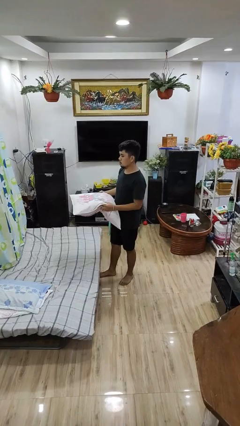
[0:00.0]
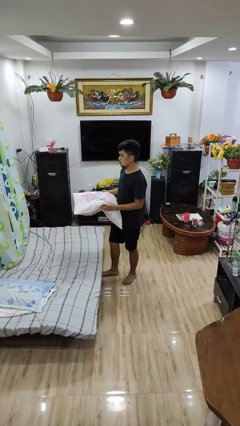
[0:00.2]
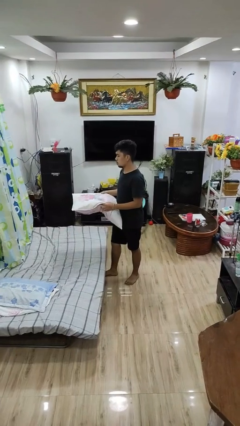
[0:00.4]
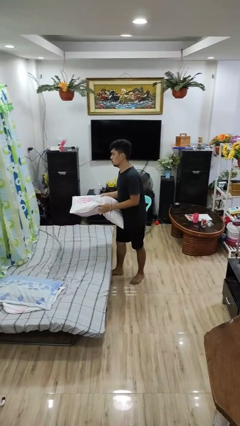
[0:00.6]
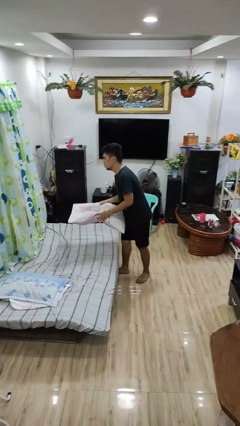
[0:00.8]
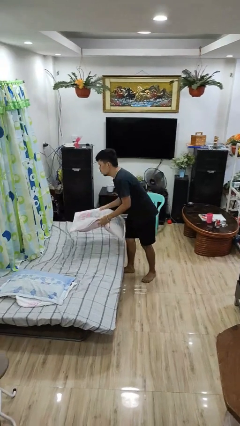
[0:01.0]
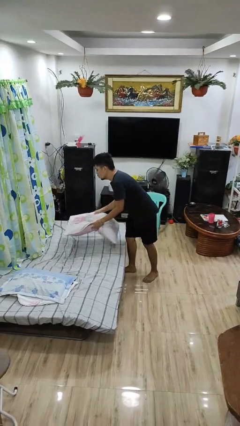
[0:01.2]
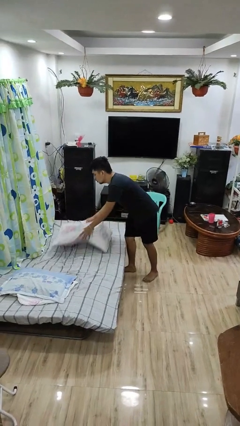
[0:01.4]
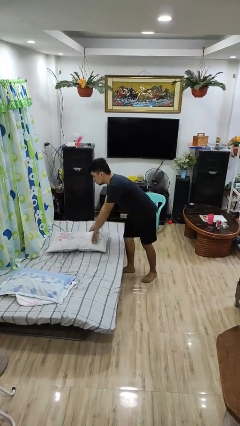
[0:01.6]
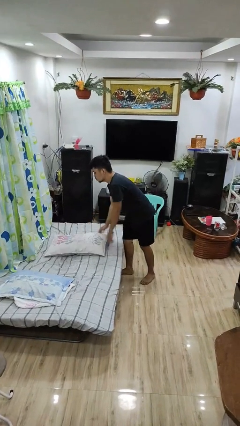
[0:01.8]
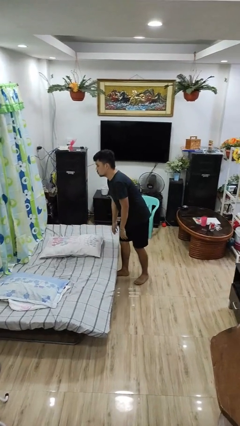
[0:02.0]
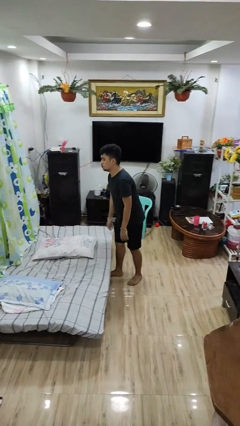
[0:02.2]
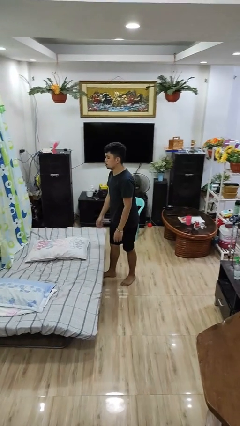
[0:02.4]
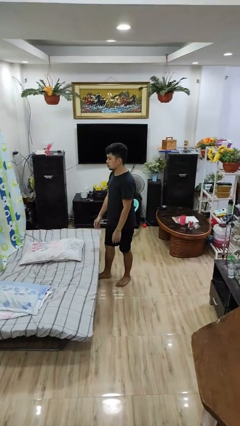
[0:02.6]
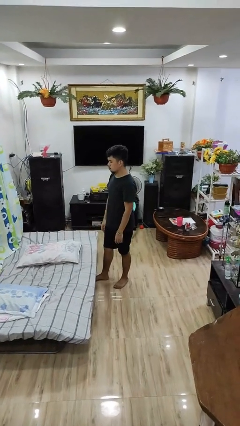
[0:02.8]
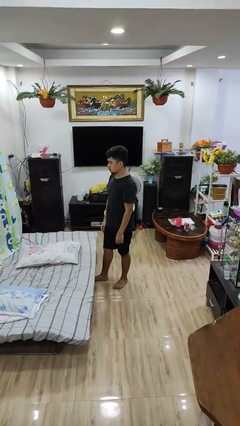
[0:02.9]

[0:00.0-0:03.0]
person puts down object on bed

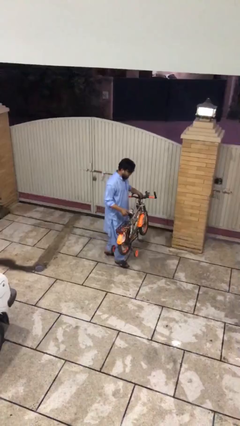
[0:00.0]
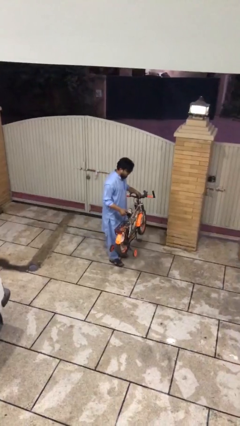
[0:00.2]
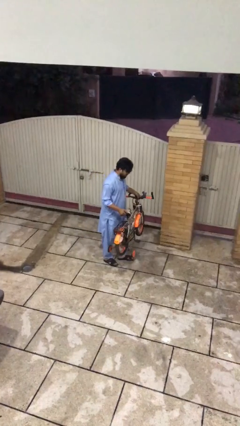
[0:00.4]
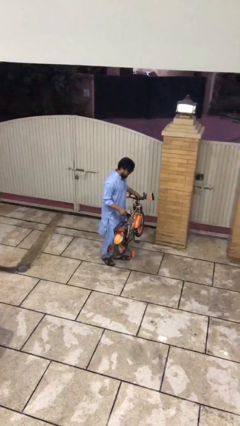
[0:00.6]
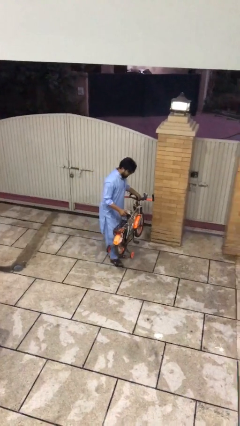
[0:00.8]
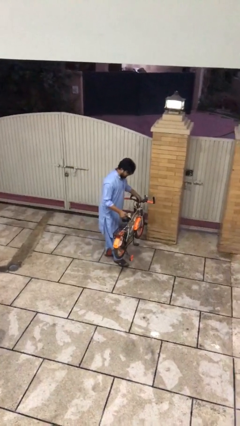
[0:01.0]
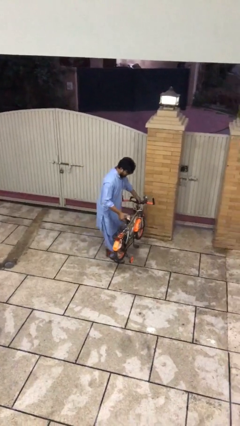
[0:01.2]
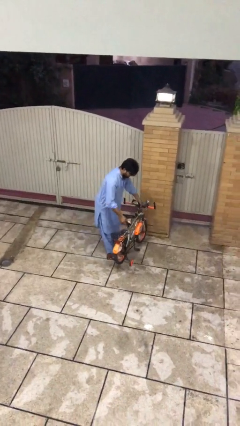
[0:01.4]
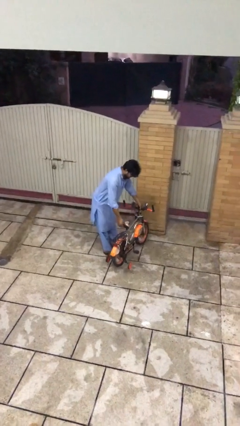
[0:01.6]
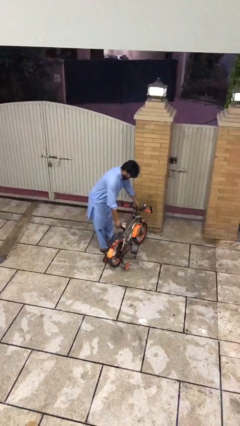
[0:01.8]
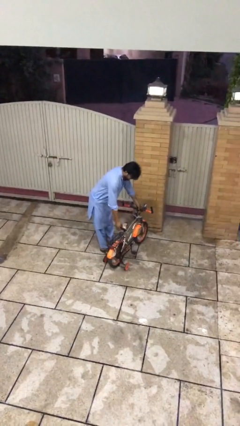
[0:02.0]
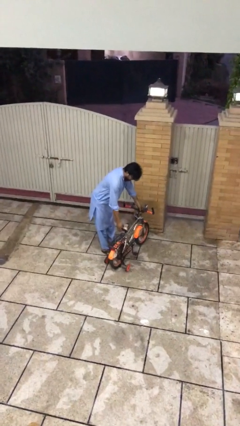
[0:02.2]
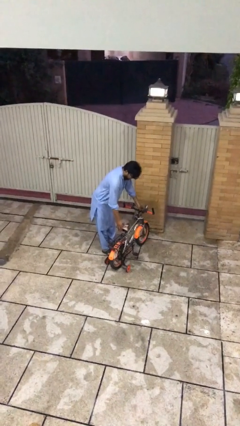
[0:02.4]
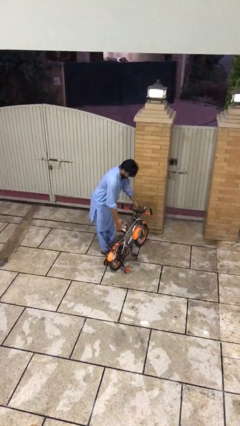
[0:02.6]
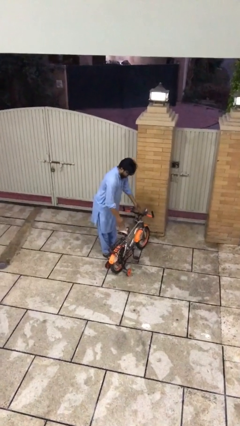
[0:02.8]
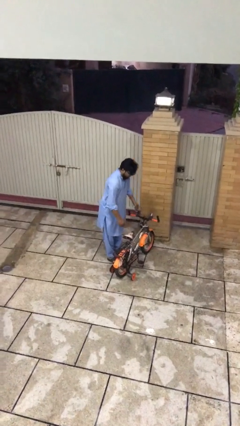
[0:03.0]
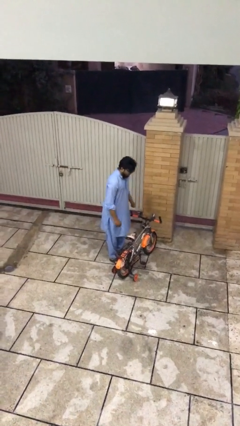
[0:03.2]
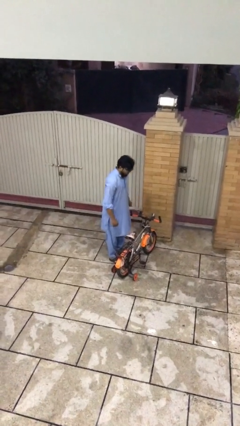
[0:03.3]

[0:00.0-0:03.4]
person puts down object on floor

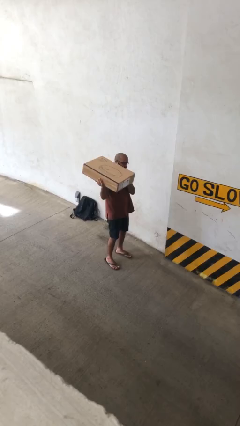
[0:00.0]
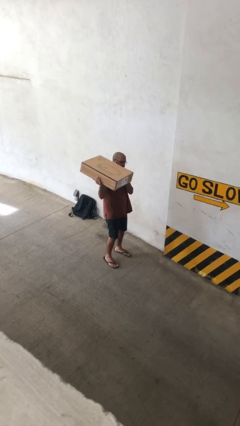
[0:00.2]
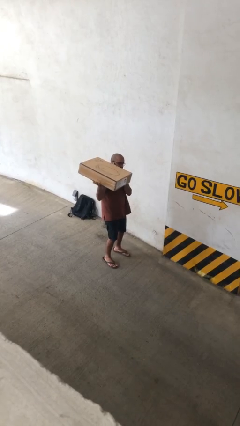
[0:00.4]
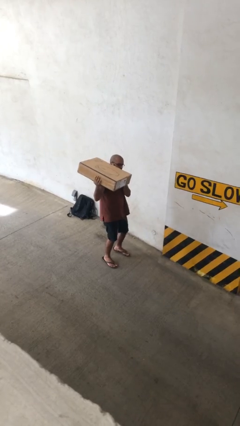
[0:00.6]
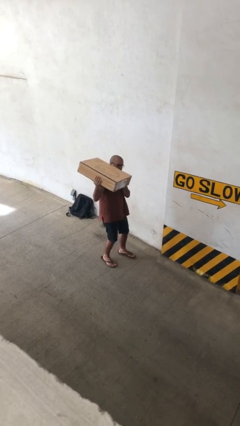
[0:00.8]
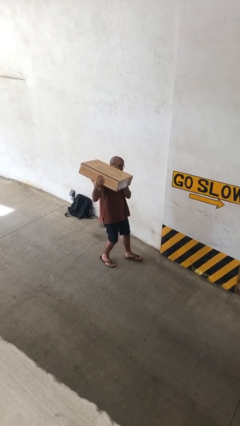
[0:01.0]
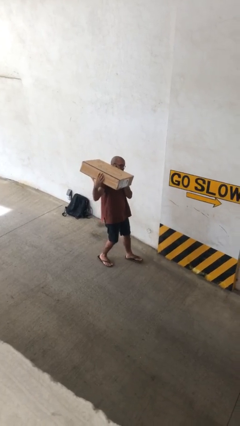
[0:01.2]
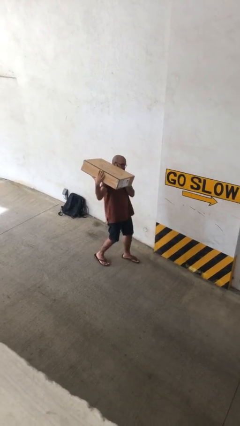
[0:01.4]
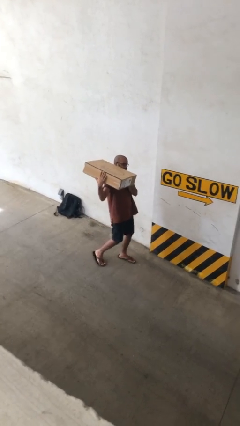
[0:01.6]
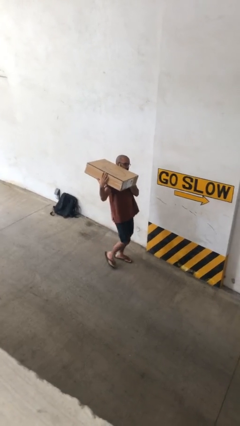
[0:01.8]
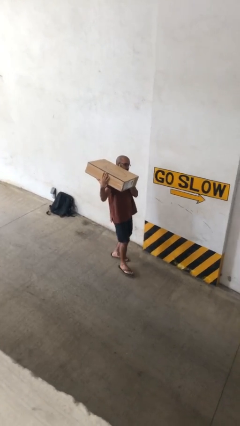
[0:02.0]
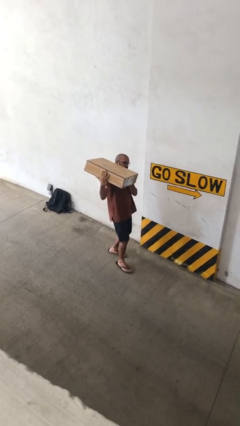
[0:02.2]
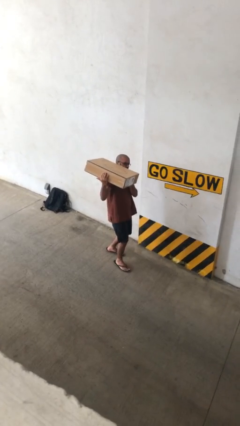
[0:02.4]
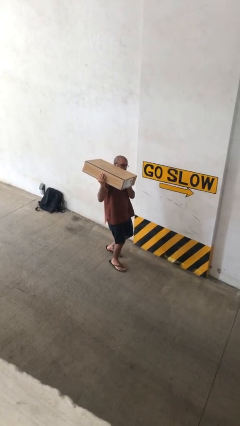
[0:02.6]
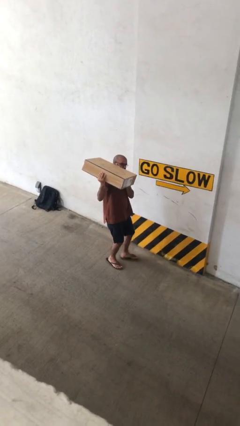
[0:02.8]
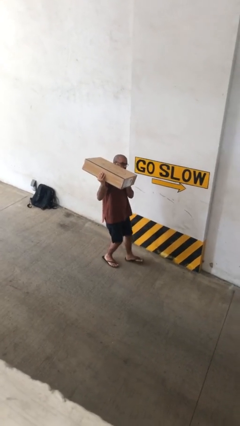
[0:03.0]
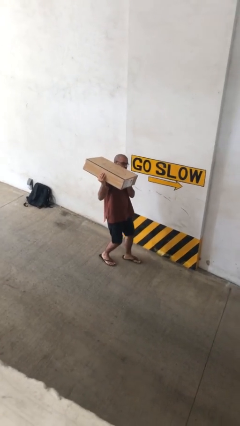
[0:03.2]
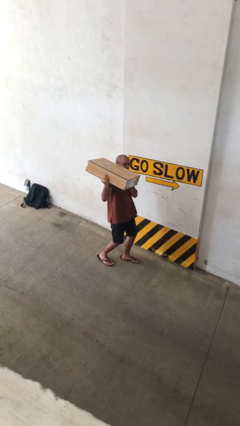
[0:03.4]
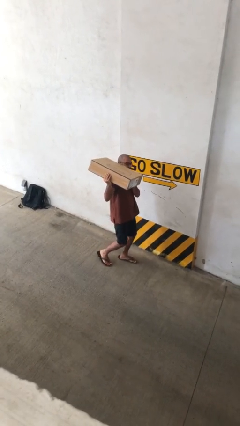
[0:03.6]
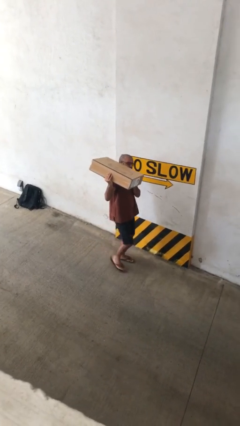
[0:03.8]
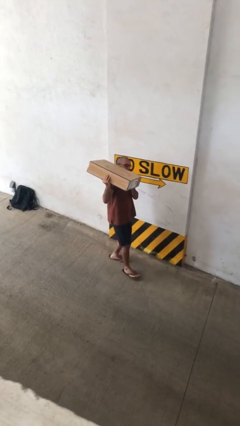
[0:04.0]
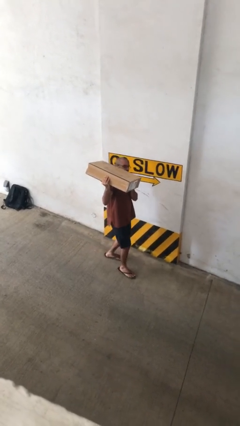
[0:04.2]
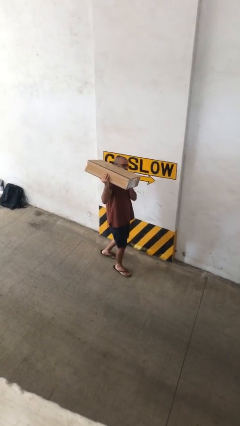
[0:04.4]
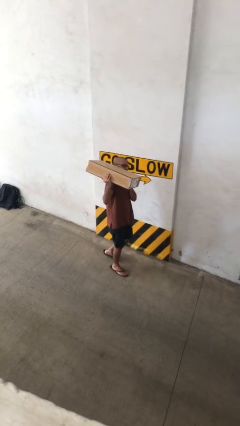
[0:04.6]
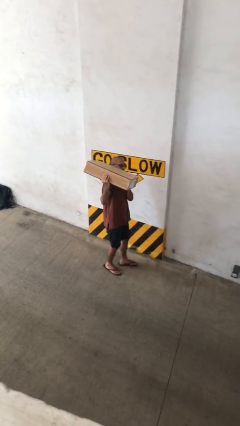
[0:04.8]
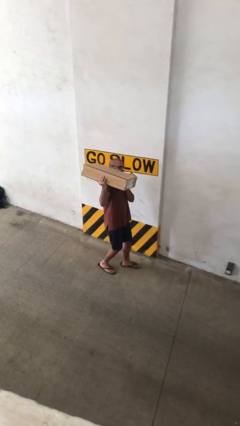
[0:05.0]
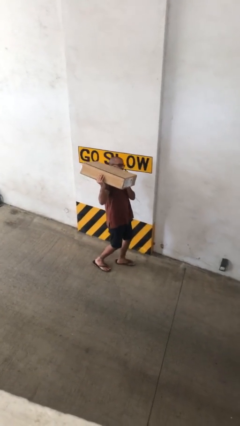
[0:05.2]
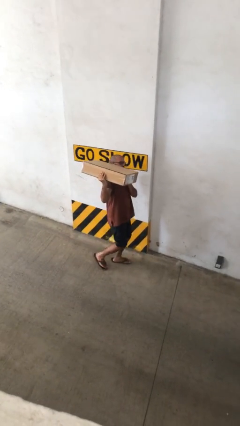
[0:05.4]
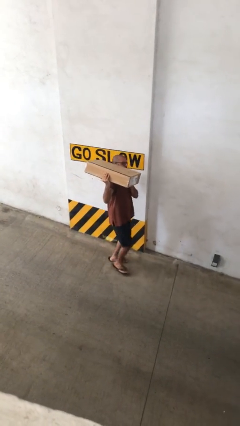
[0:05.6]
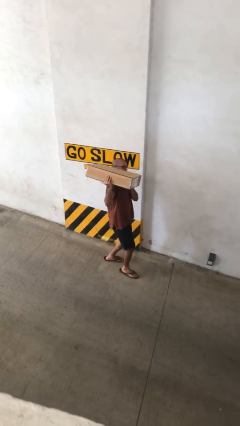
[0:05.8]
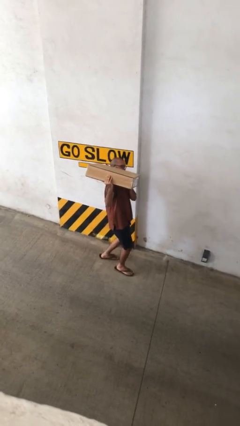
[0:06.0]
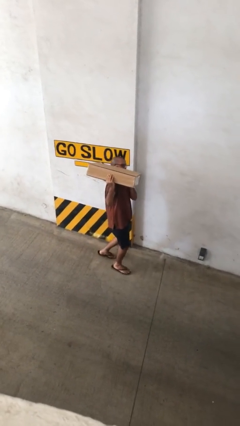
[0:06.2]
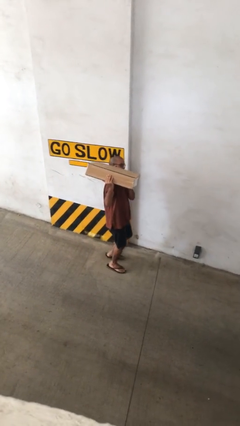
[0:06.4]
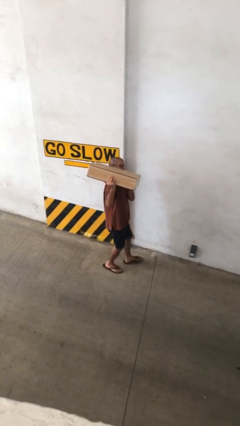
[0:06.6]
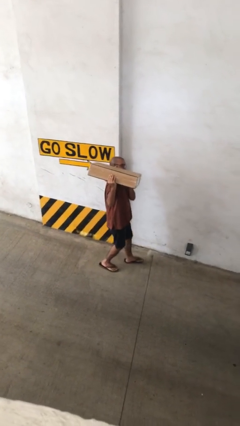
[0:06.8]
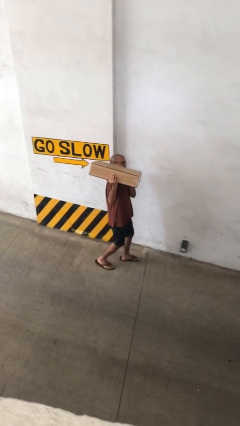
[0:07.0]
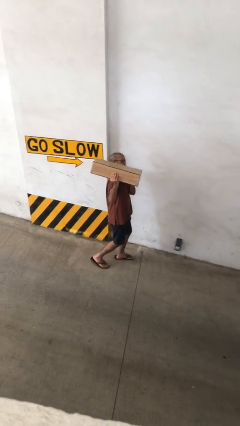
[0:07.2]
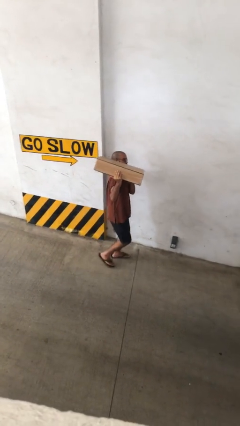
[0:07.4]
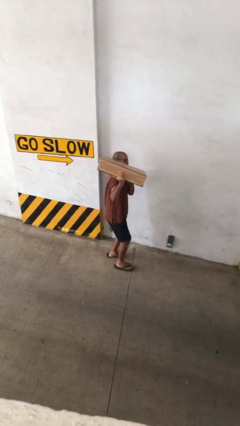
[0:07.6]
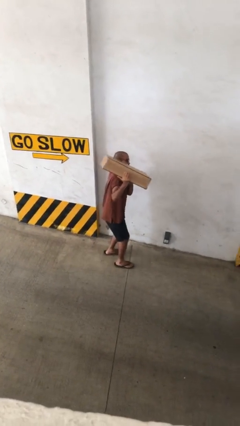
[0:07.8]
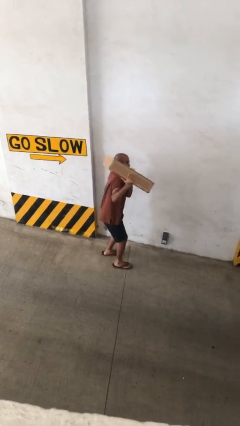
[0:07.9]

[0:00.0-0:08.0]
person carries heavy object

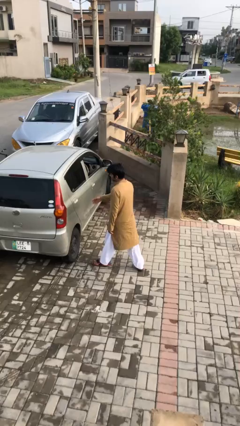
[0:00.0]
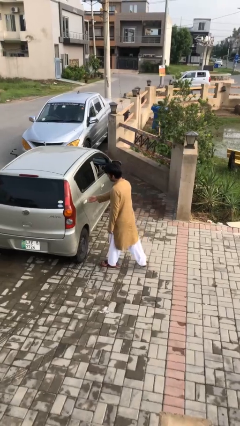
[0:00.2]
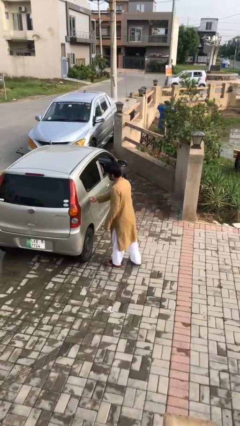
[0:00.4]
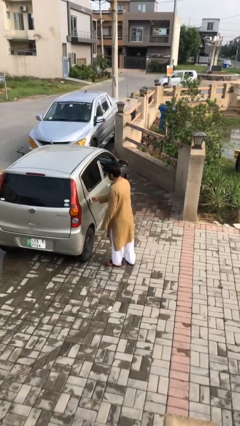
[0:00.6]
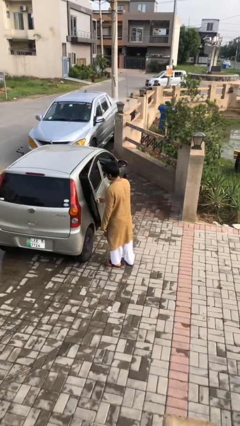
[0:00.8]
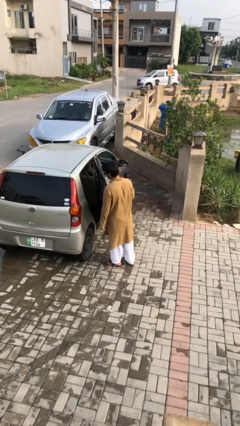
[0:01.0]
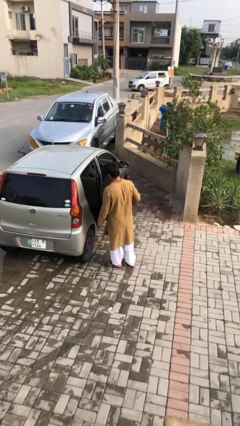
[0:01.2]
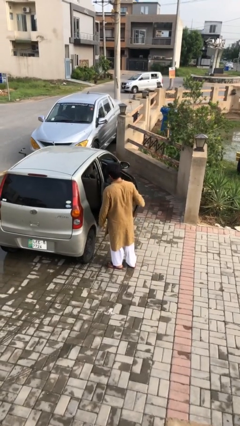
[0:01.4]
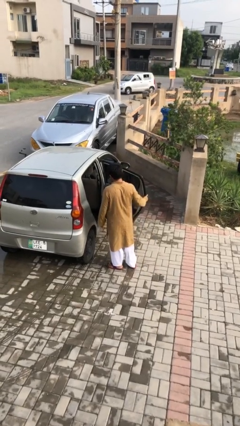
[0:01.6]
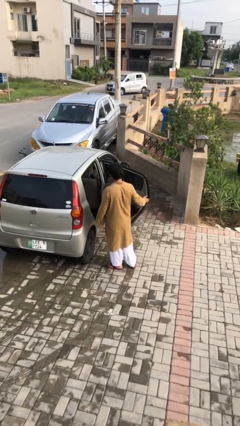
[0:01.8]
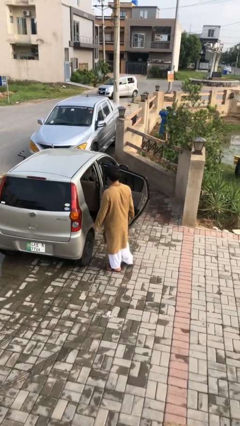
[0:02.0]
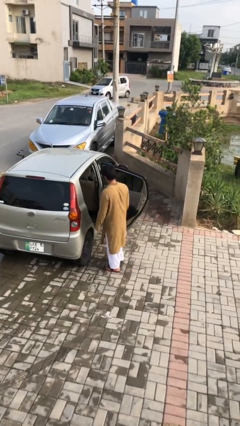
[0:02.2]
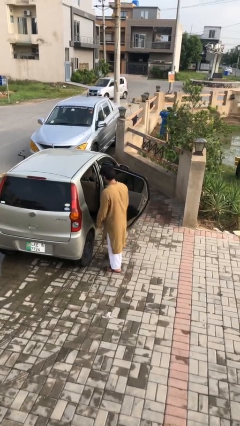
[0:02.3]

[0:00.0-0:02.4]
person opens car door

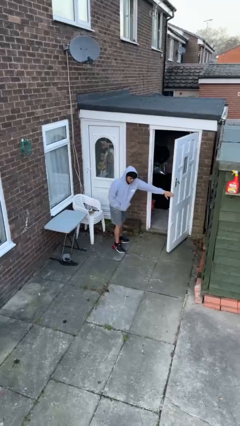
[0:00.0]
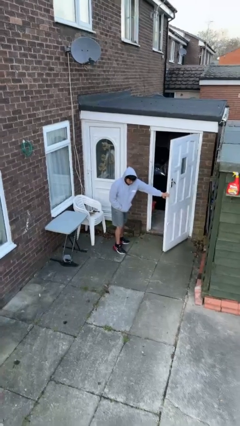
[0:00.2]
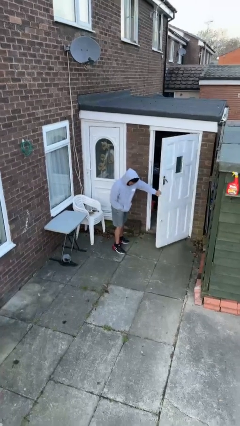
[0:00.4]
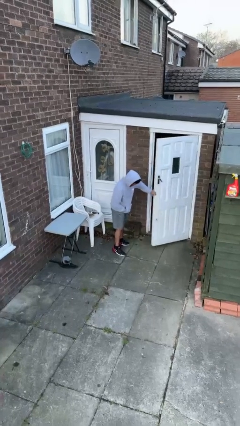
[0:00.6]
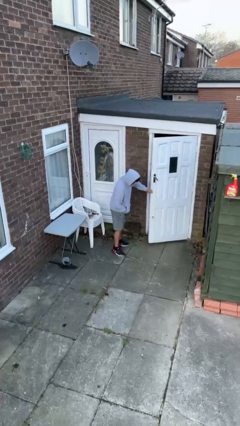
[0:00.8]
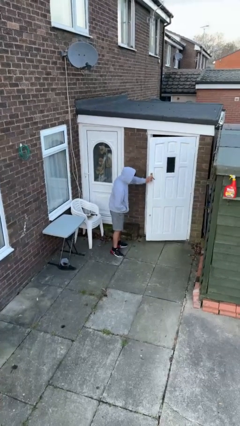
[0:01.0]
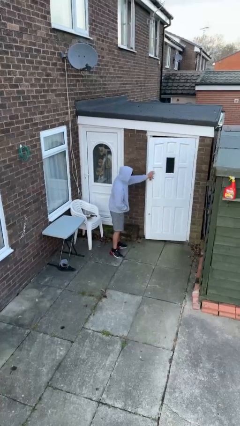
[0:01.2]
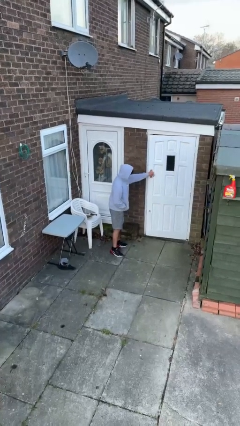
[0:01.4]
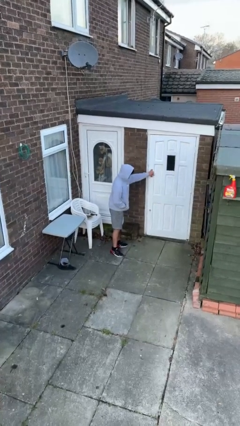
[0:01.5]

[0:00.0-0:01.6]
person closes facility door
